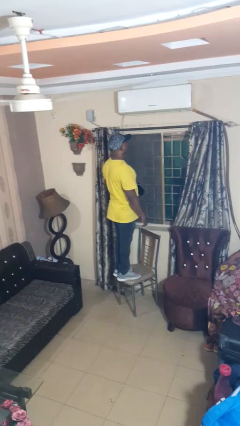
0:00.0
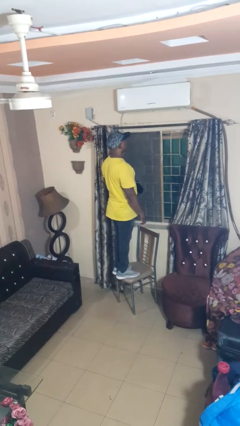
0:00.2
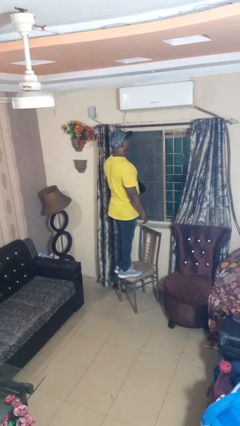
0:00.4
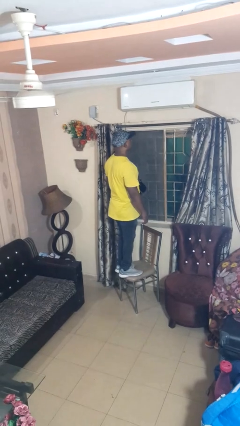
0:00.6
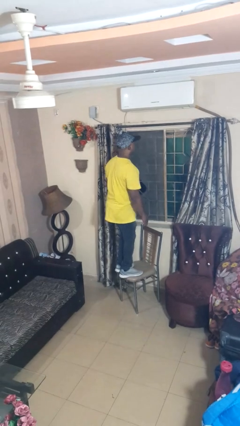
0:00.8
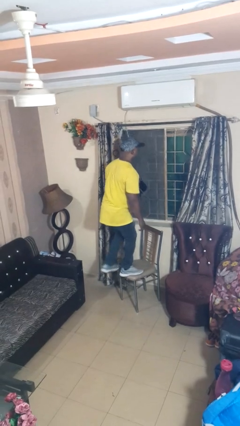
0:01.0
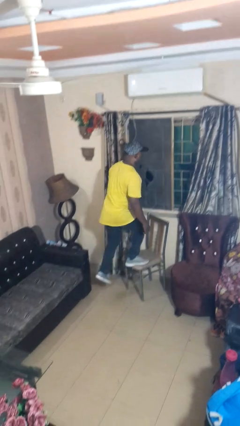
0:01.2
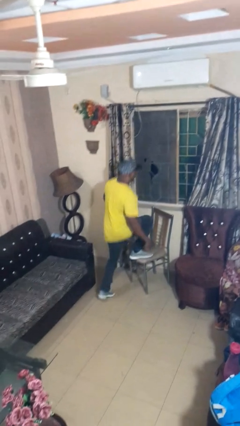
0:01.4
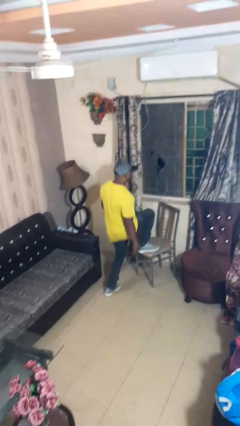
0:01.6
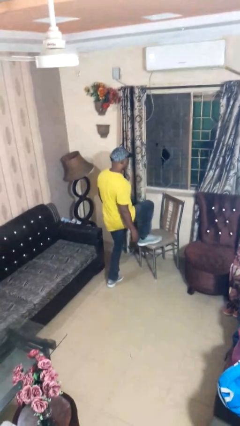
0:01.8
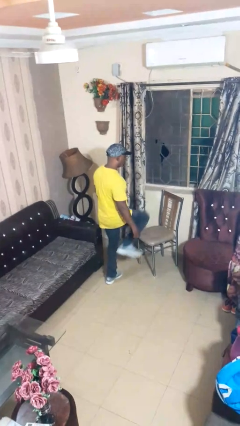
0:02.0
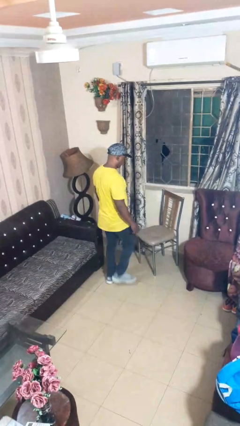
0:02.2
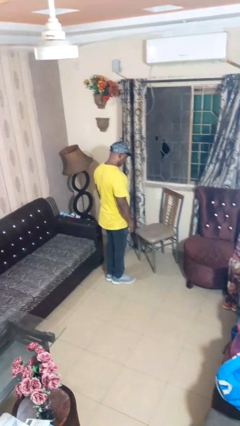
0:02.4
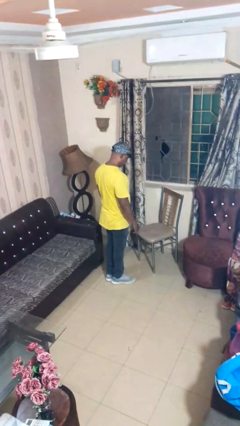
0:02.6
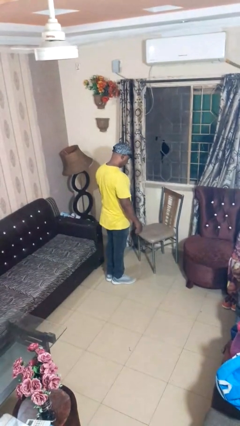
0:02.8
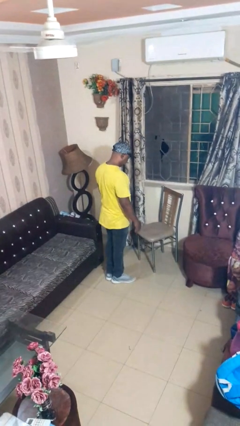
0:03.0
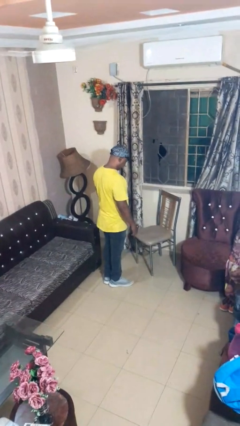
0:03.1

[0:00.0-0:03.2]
person climbs off chair

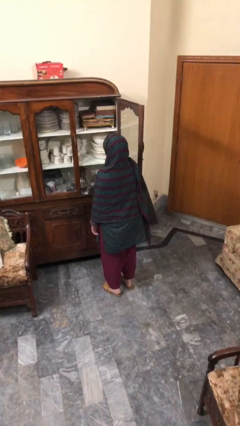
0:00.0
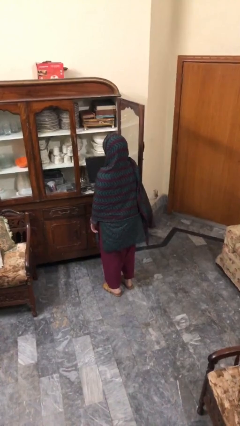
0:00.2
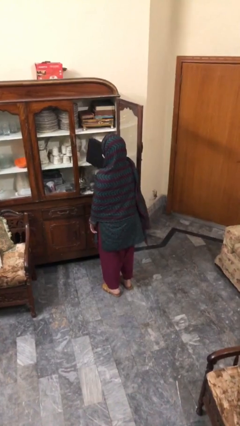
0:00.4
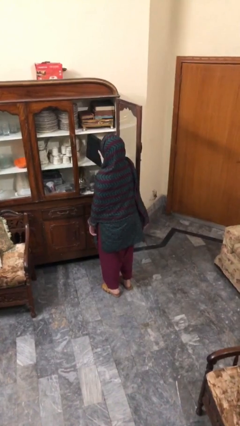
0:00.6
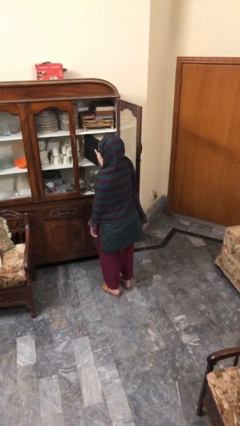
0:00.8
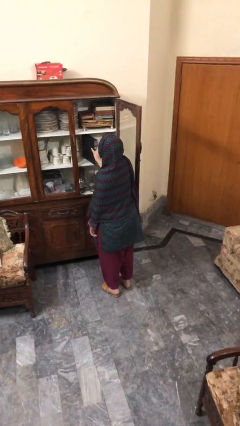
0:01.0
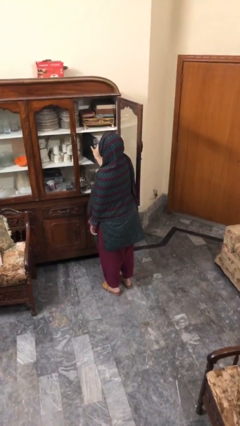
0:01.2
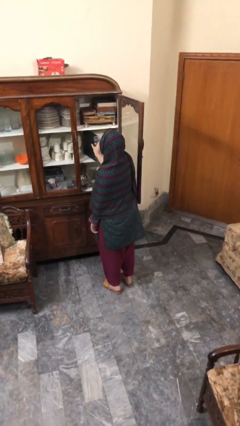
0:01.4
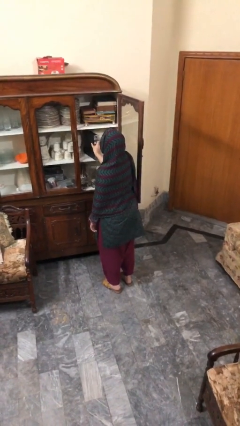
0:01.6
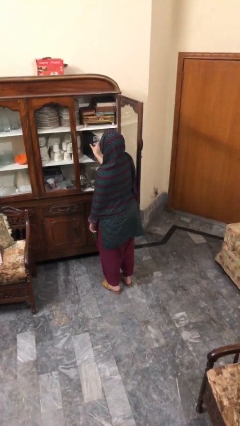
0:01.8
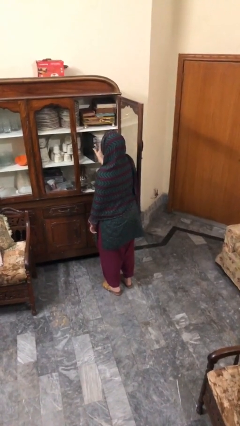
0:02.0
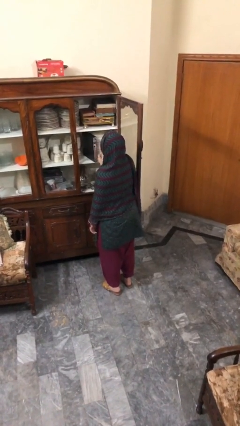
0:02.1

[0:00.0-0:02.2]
person puts down object into cabinet

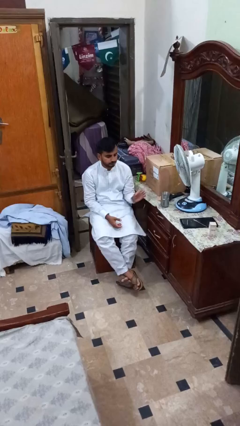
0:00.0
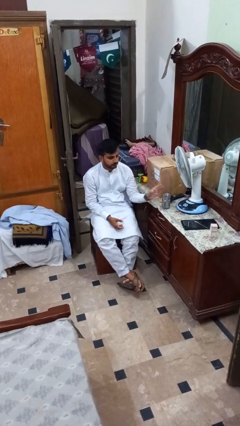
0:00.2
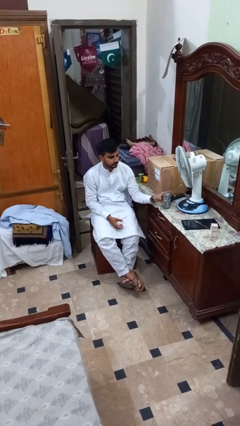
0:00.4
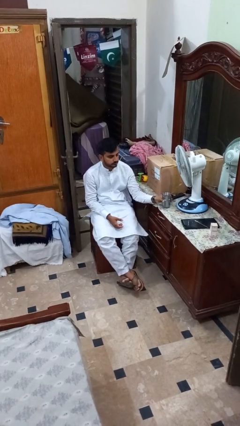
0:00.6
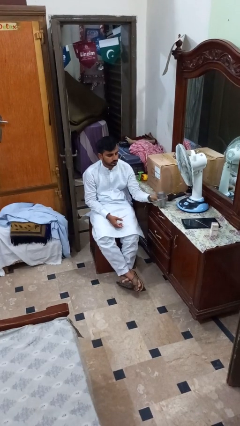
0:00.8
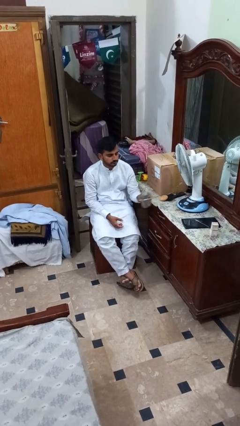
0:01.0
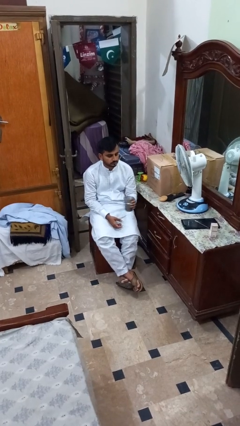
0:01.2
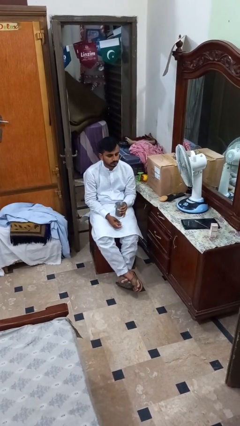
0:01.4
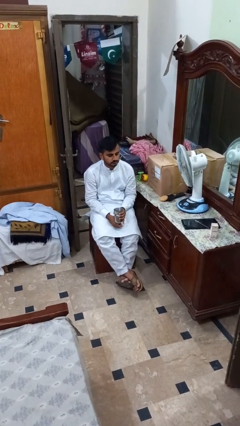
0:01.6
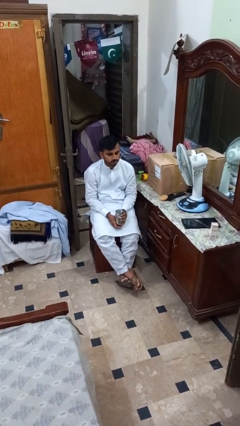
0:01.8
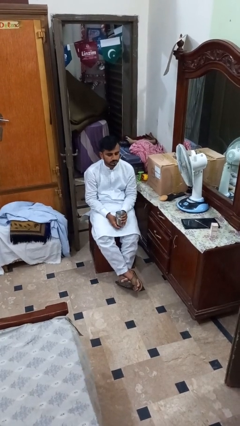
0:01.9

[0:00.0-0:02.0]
person picks up object from table

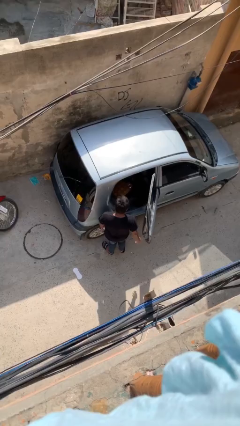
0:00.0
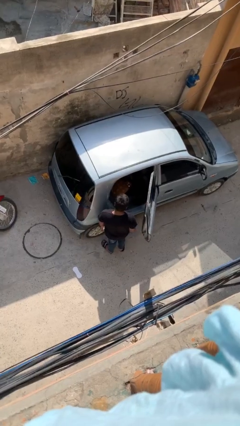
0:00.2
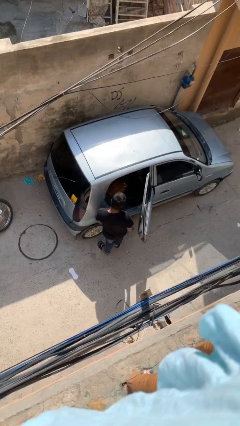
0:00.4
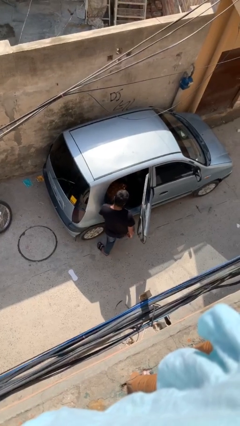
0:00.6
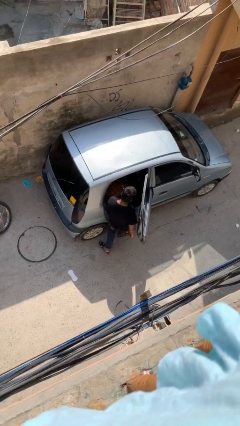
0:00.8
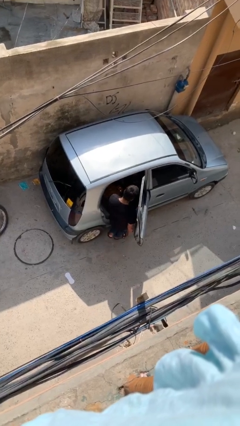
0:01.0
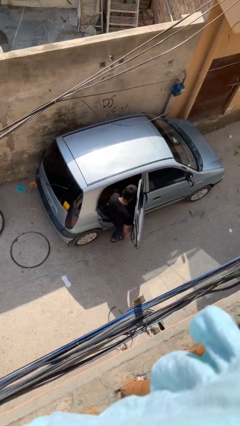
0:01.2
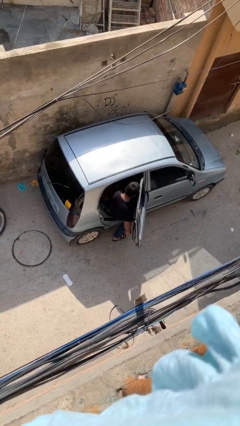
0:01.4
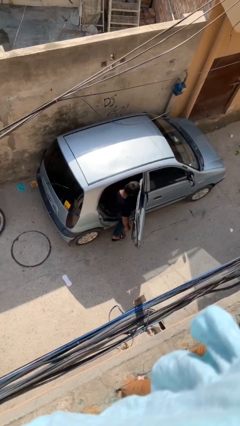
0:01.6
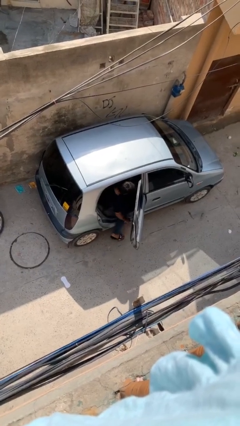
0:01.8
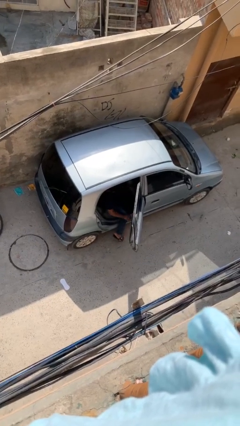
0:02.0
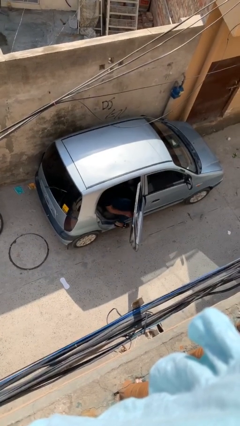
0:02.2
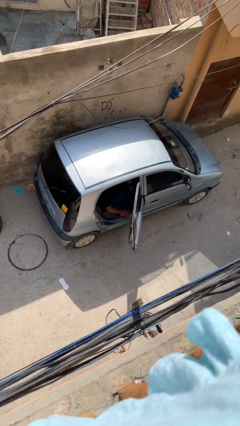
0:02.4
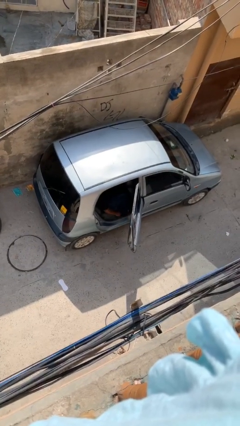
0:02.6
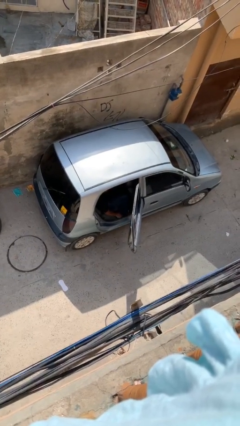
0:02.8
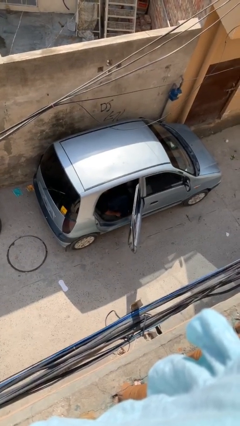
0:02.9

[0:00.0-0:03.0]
person enters car

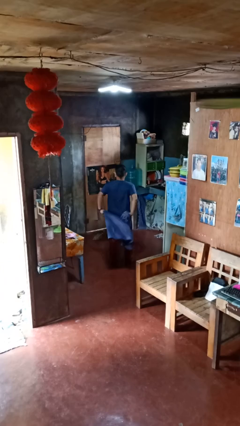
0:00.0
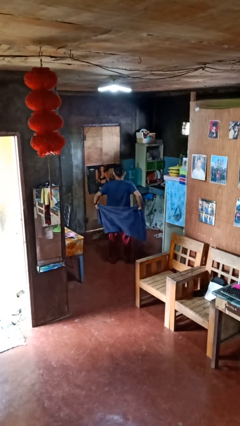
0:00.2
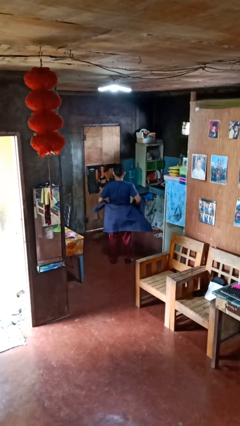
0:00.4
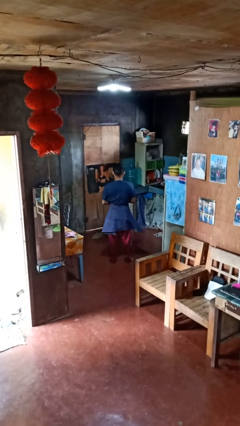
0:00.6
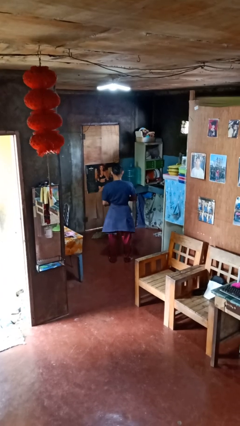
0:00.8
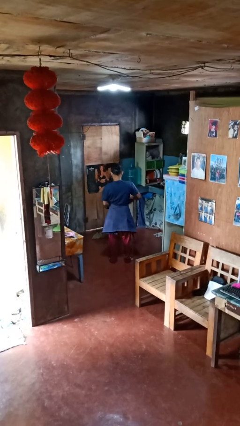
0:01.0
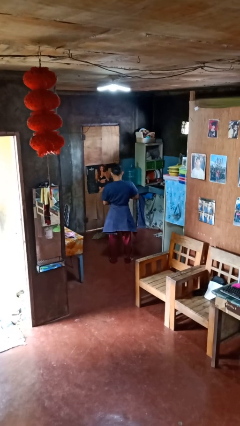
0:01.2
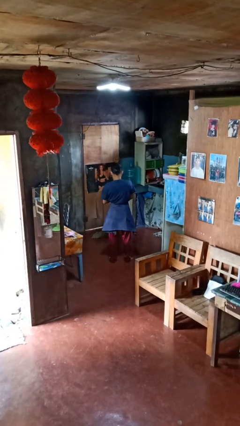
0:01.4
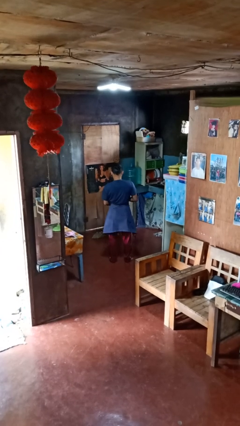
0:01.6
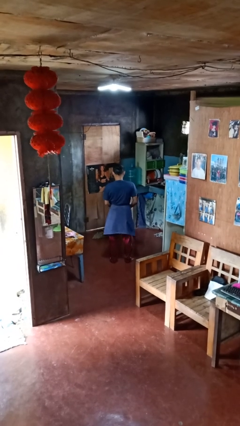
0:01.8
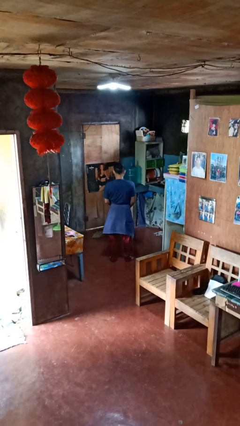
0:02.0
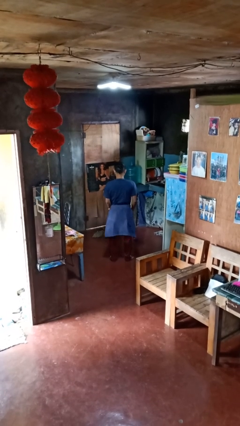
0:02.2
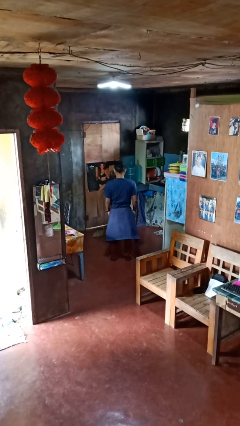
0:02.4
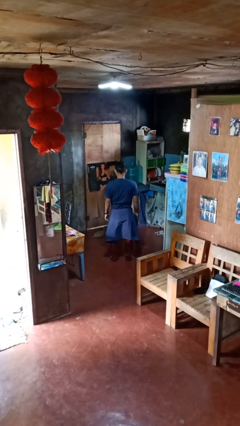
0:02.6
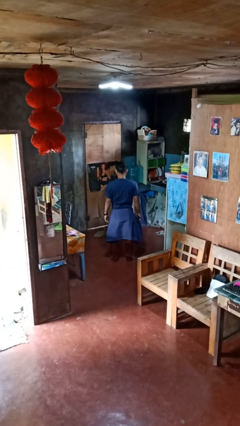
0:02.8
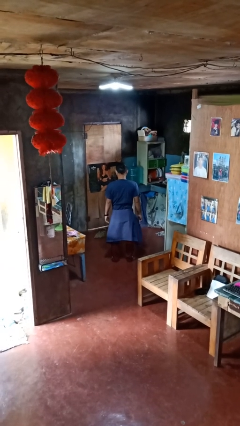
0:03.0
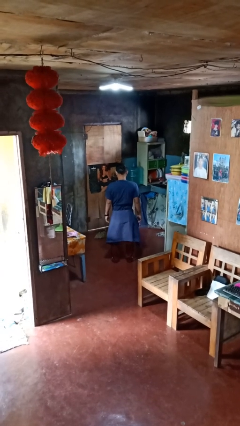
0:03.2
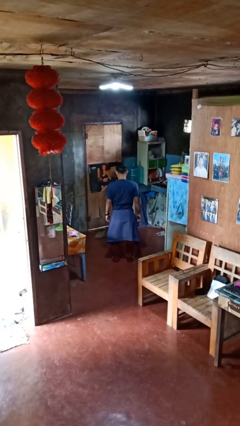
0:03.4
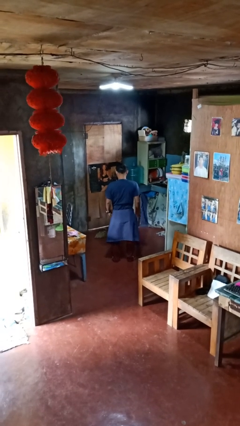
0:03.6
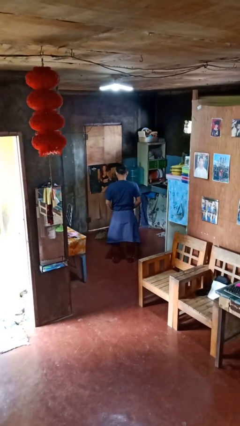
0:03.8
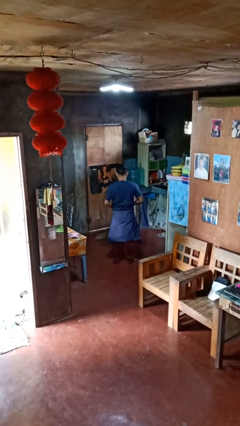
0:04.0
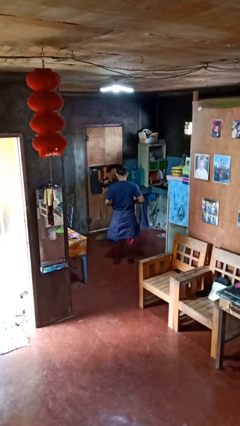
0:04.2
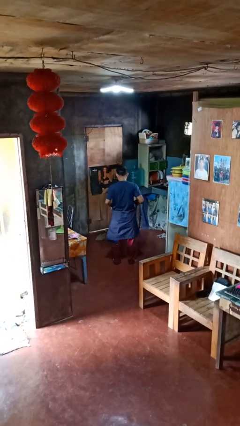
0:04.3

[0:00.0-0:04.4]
person ties jacket around waist

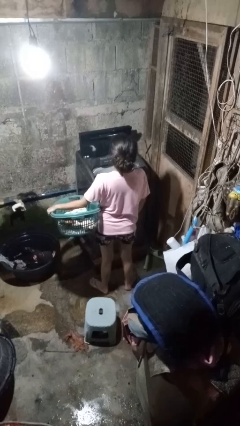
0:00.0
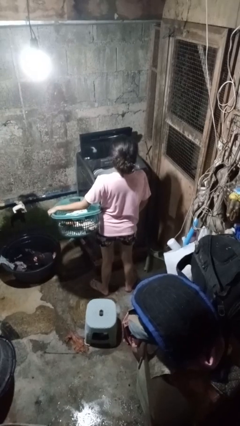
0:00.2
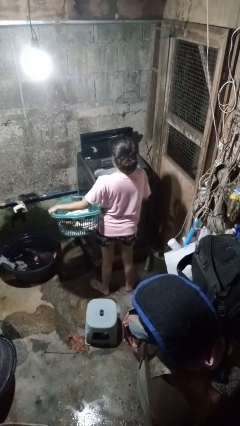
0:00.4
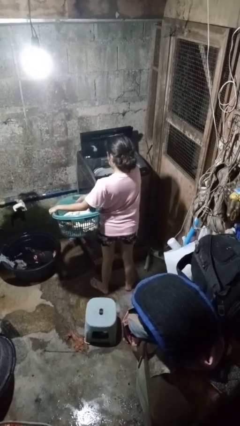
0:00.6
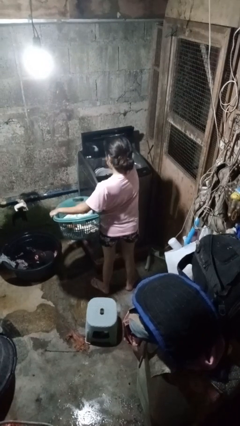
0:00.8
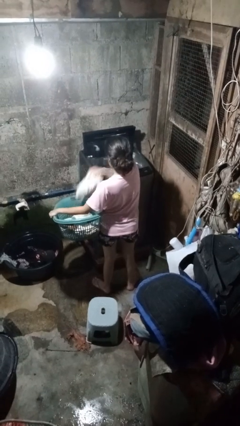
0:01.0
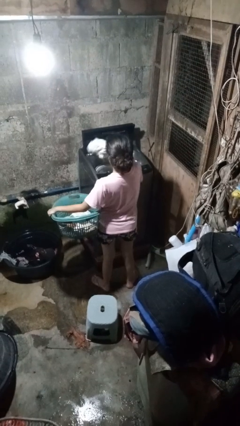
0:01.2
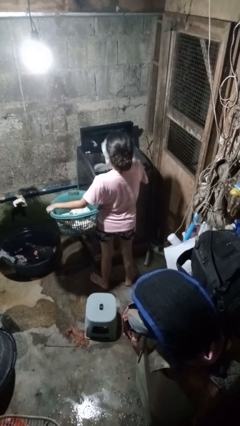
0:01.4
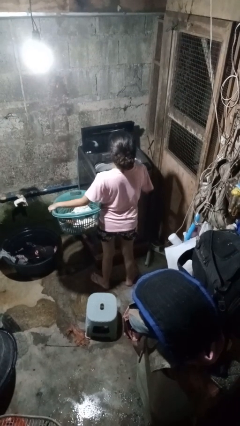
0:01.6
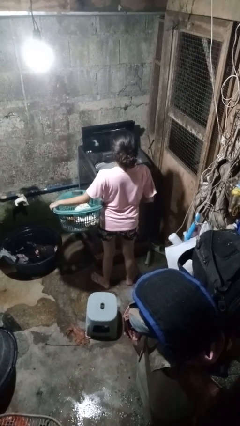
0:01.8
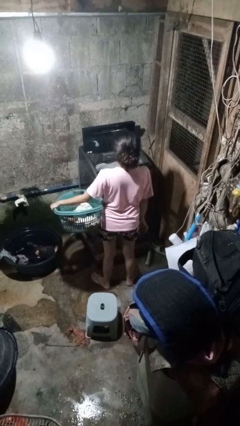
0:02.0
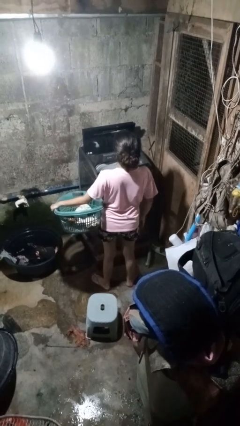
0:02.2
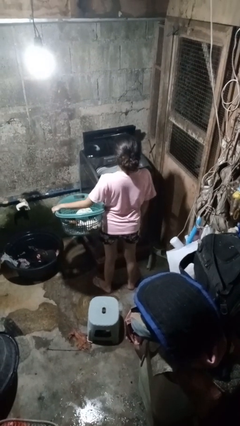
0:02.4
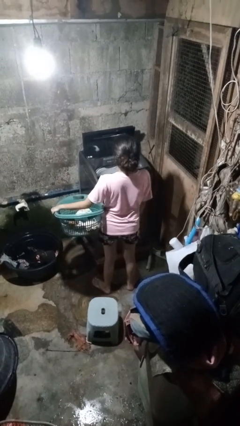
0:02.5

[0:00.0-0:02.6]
person loads dryer

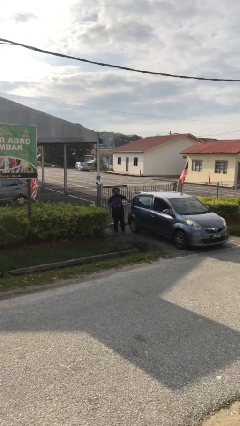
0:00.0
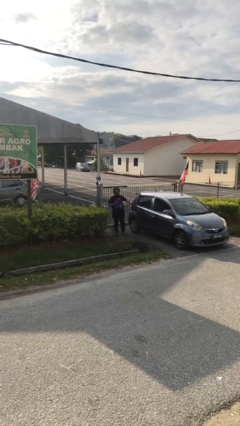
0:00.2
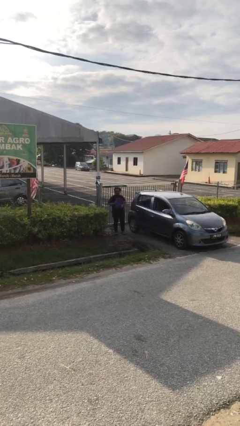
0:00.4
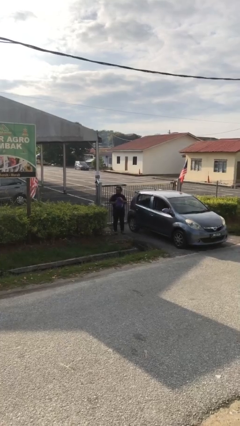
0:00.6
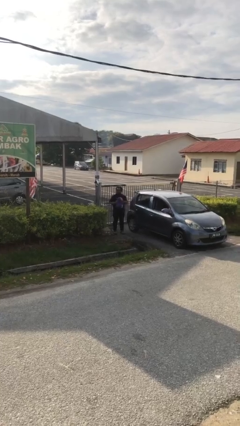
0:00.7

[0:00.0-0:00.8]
person closes car door
